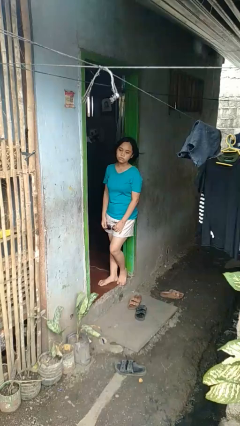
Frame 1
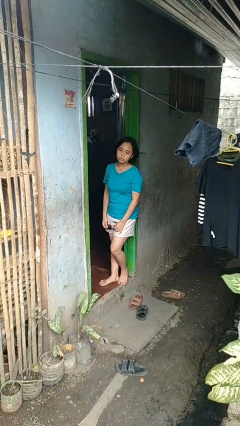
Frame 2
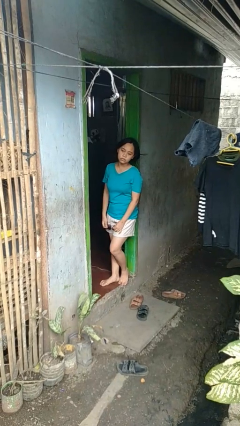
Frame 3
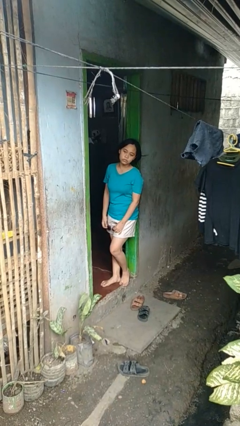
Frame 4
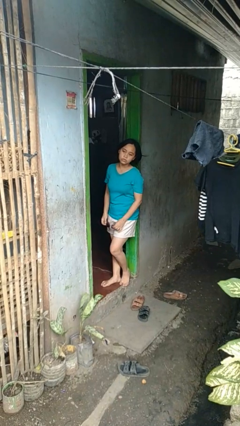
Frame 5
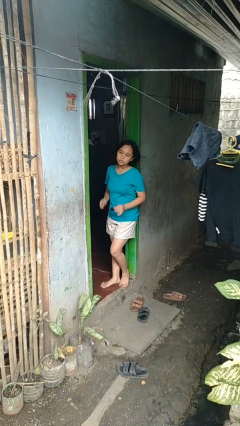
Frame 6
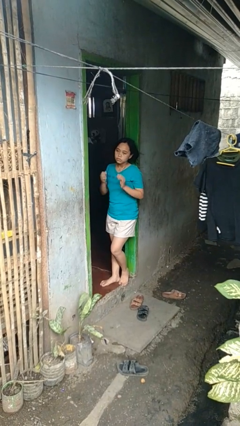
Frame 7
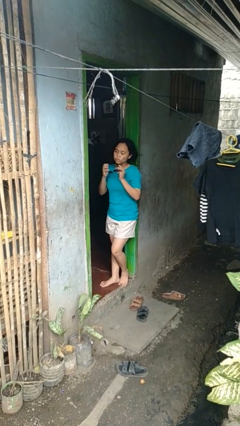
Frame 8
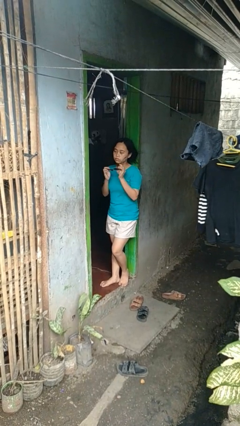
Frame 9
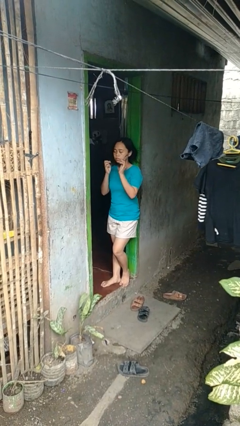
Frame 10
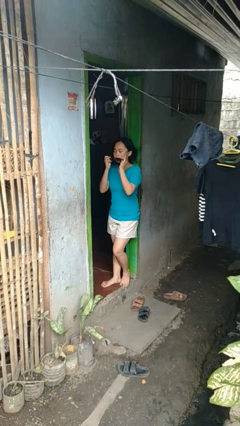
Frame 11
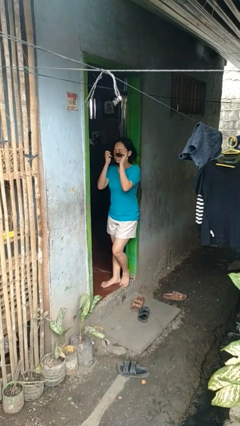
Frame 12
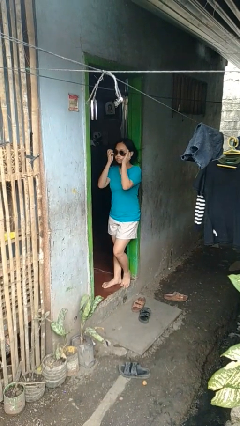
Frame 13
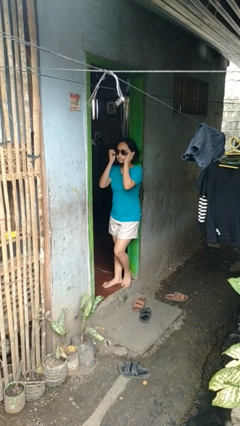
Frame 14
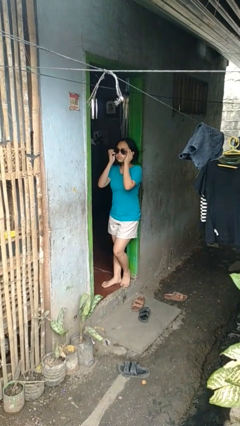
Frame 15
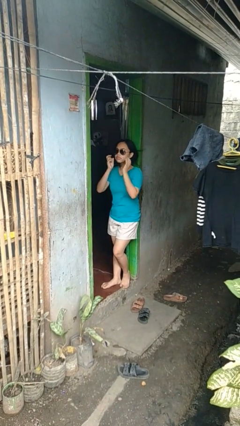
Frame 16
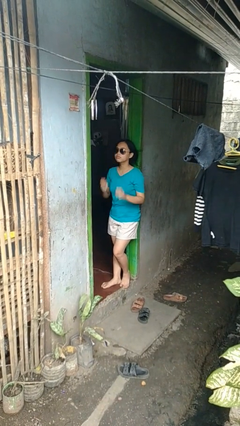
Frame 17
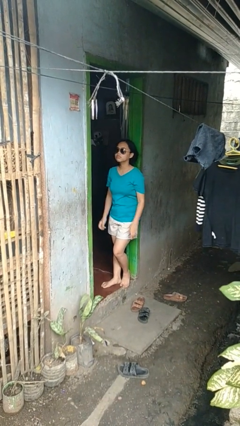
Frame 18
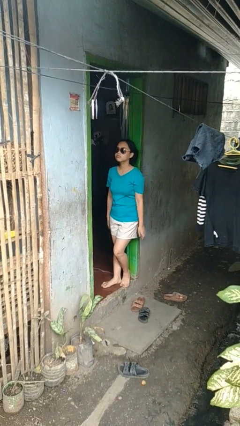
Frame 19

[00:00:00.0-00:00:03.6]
person puts on sunglasses

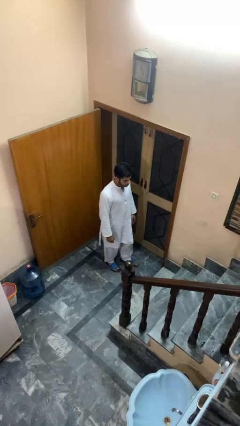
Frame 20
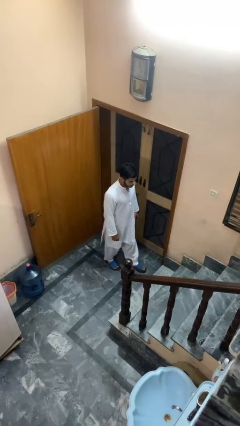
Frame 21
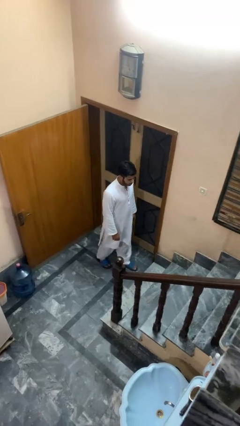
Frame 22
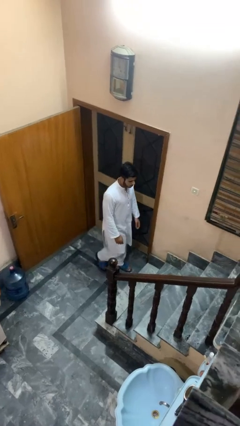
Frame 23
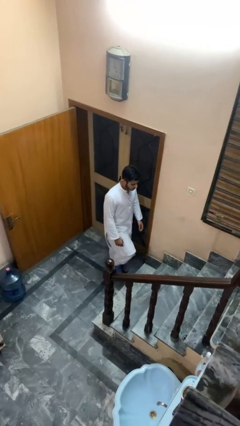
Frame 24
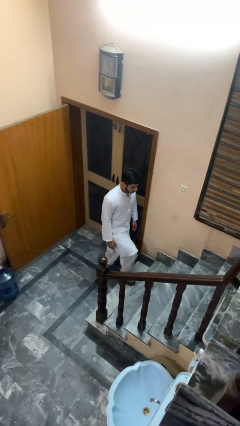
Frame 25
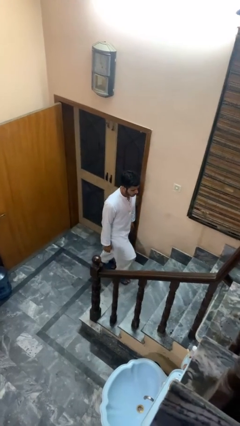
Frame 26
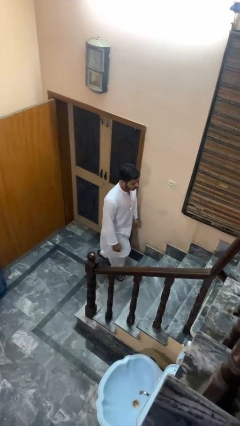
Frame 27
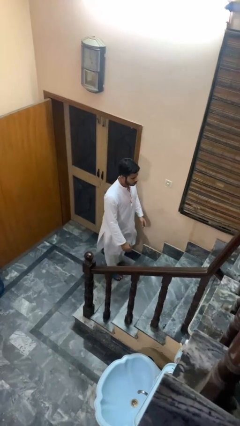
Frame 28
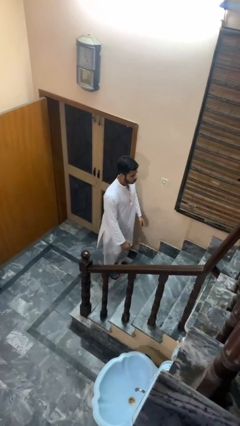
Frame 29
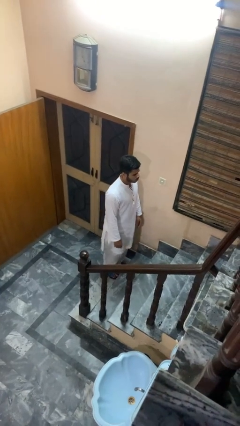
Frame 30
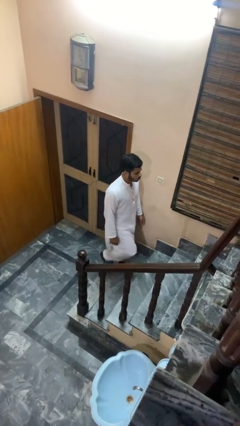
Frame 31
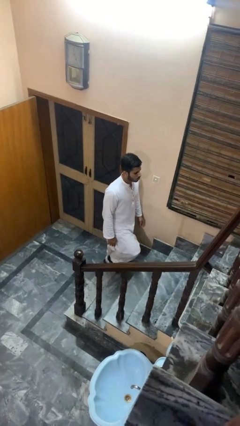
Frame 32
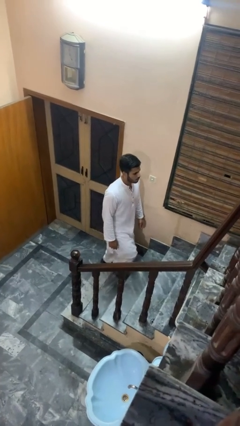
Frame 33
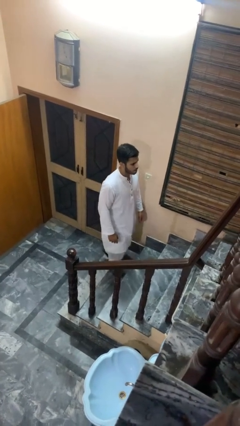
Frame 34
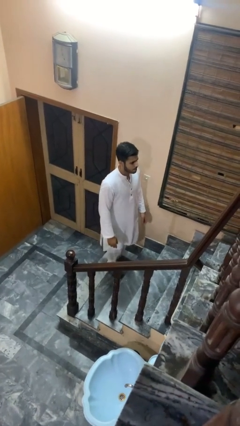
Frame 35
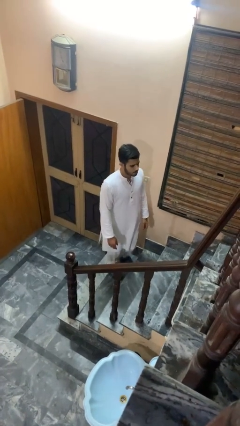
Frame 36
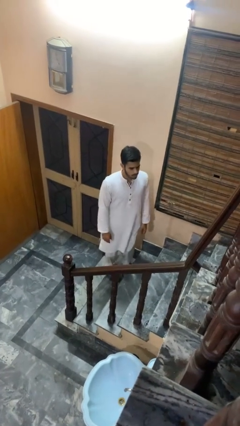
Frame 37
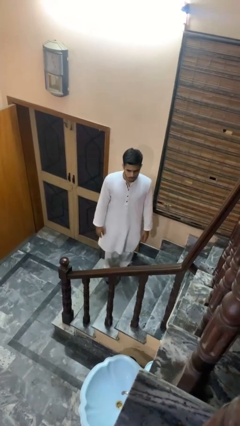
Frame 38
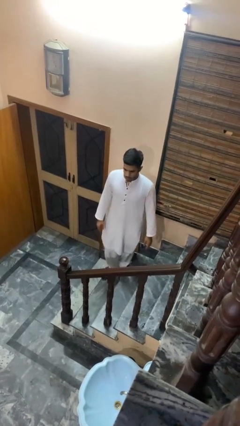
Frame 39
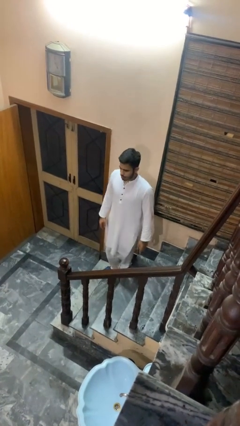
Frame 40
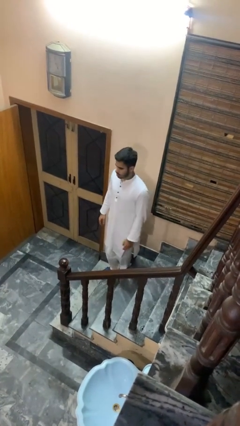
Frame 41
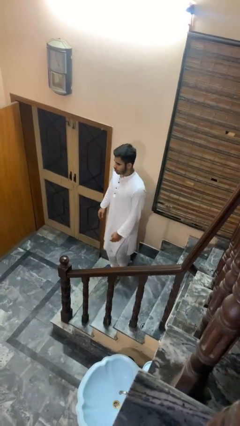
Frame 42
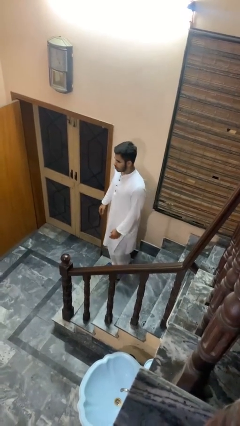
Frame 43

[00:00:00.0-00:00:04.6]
person climbs up stairs

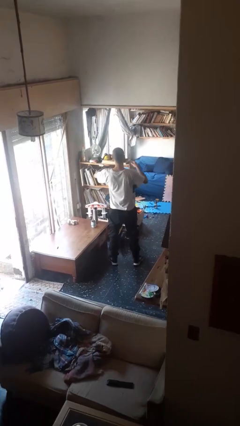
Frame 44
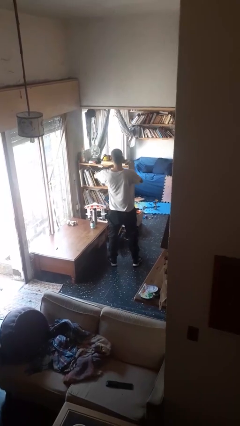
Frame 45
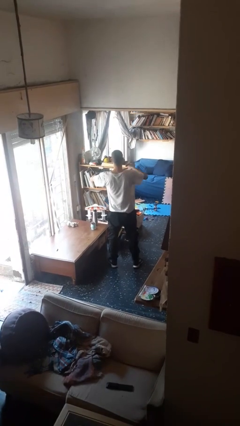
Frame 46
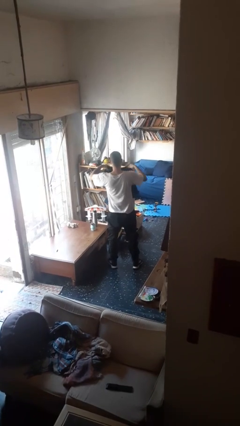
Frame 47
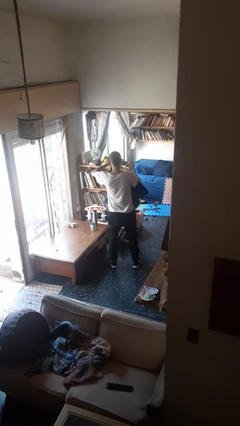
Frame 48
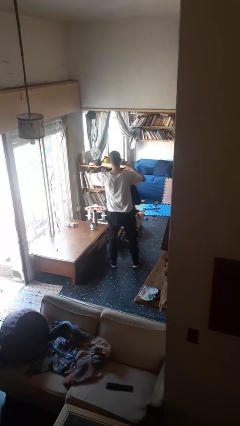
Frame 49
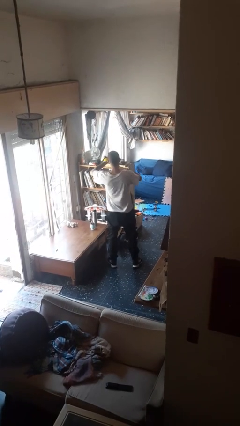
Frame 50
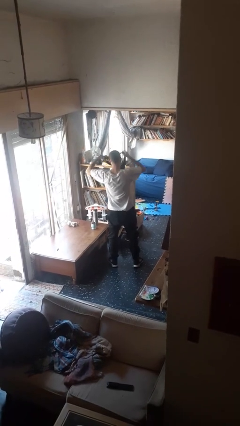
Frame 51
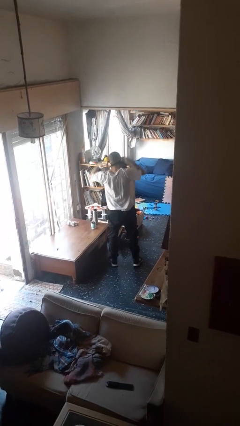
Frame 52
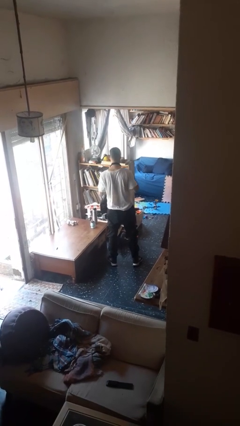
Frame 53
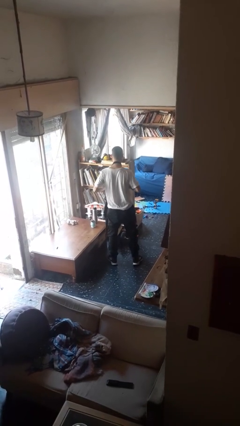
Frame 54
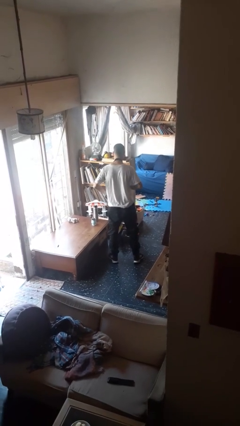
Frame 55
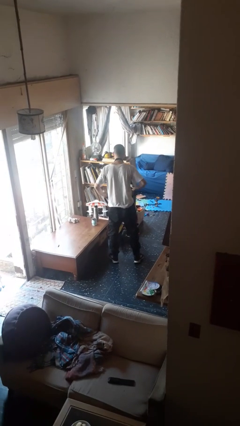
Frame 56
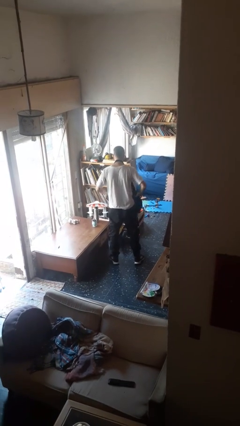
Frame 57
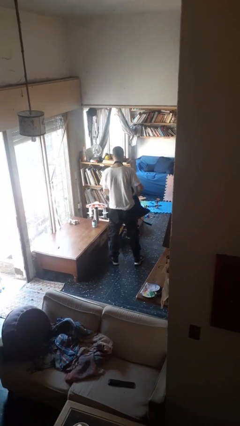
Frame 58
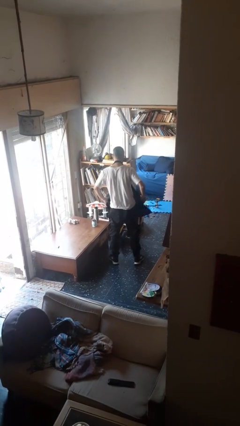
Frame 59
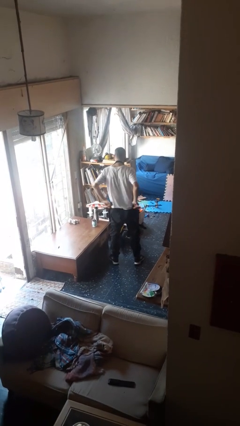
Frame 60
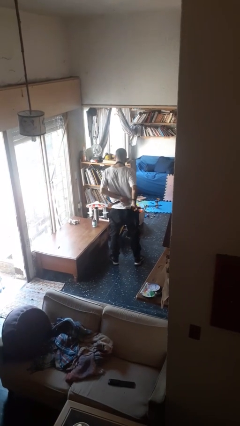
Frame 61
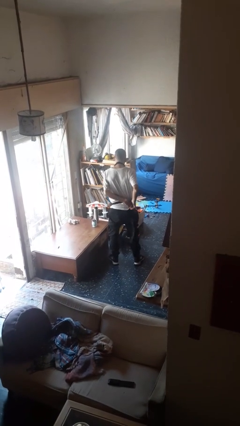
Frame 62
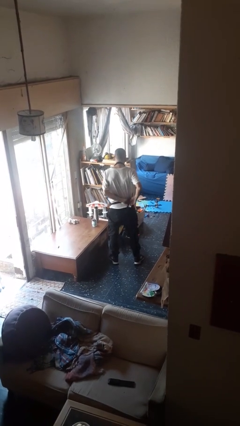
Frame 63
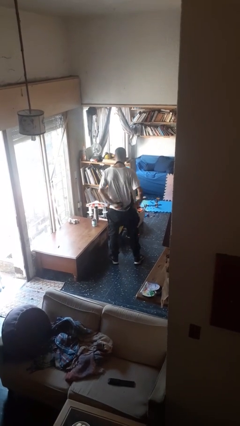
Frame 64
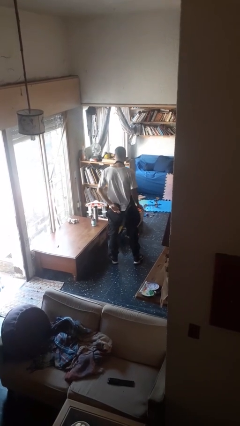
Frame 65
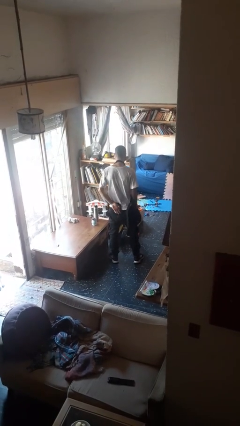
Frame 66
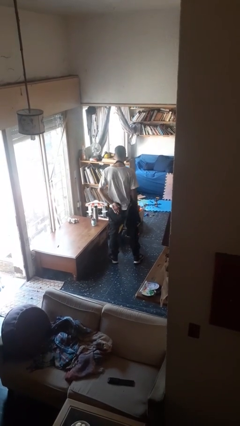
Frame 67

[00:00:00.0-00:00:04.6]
person puts on apron

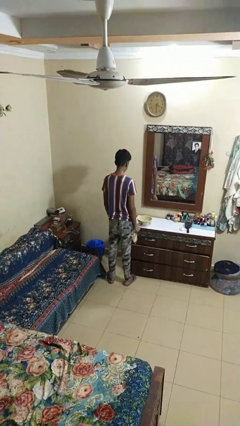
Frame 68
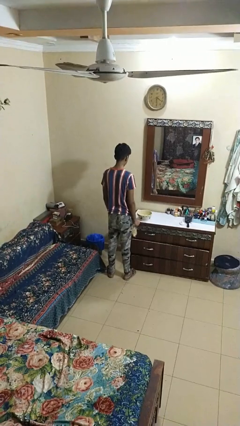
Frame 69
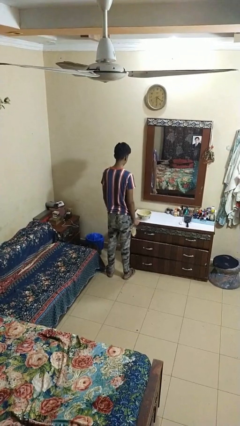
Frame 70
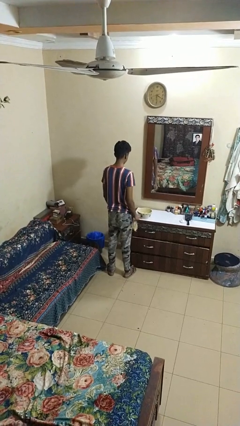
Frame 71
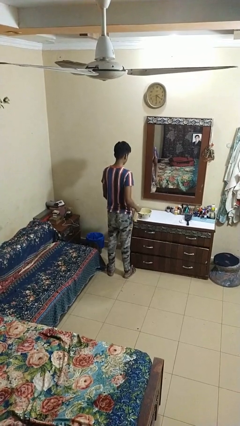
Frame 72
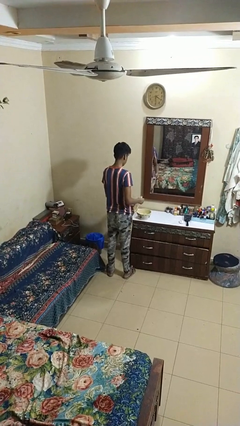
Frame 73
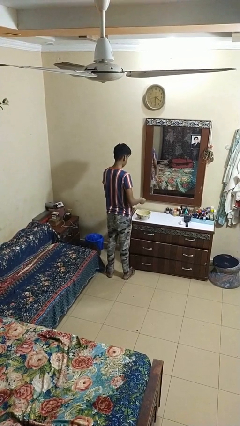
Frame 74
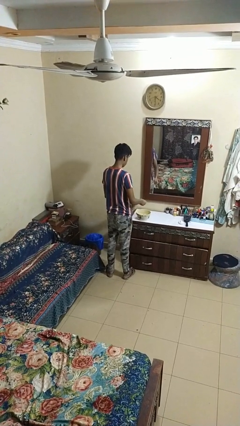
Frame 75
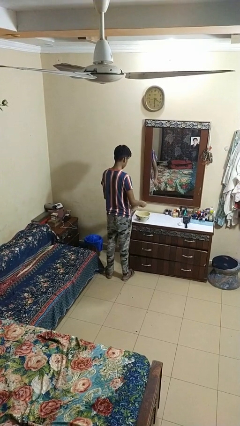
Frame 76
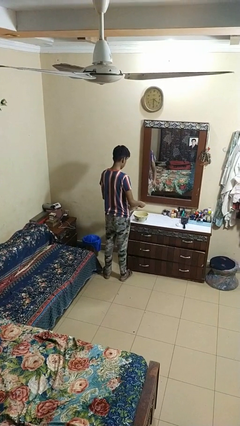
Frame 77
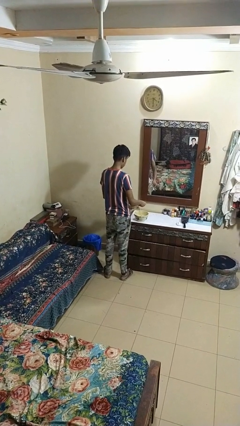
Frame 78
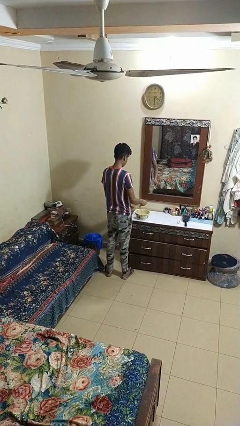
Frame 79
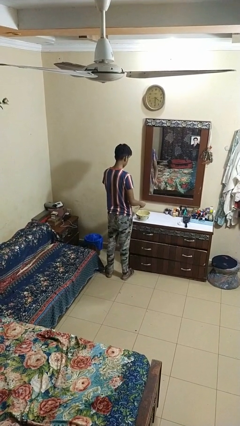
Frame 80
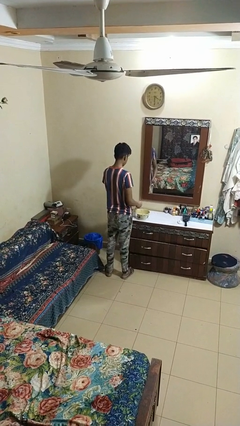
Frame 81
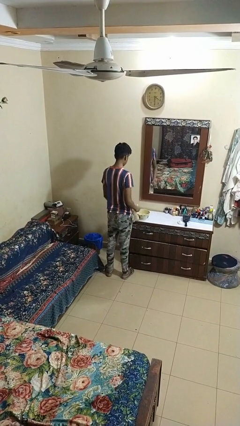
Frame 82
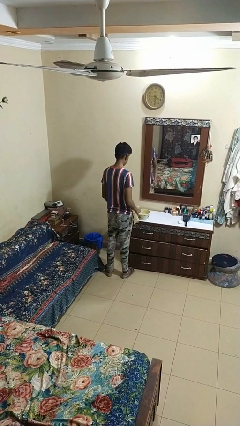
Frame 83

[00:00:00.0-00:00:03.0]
person pours into bowl

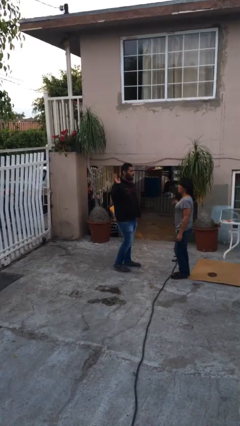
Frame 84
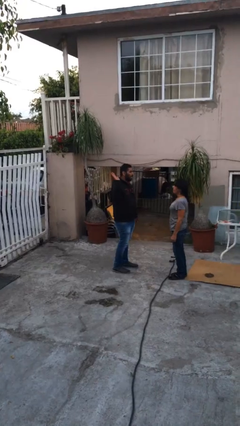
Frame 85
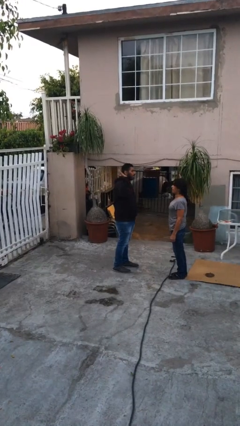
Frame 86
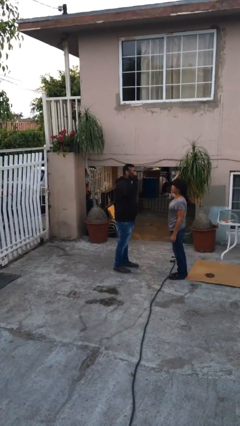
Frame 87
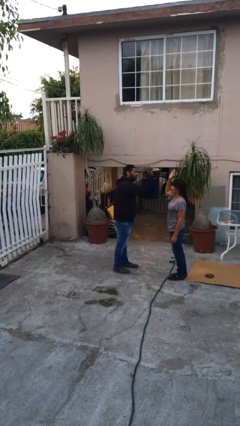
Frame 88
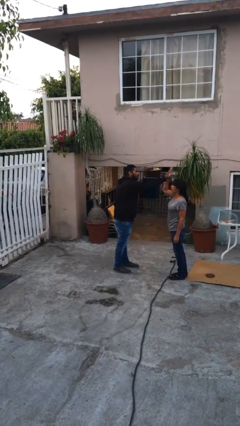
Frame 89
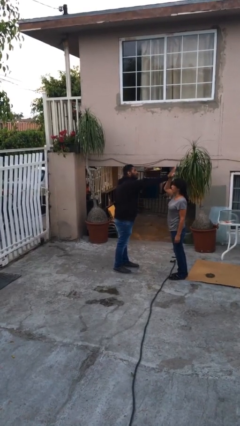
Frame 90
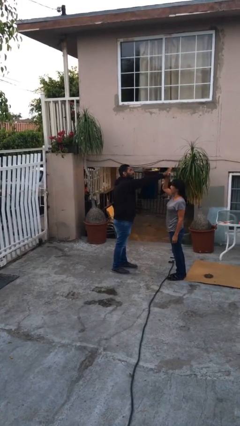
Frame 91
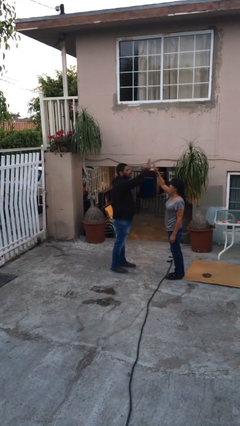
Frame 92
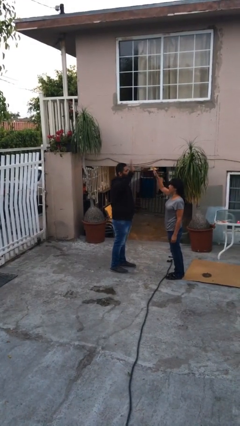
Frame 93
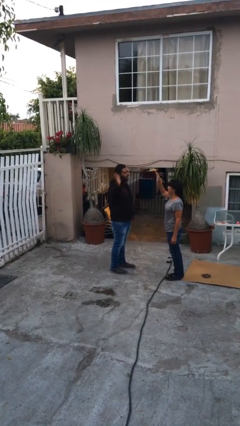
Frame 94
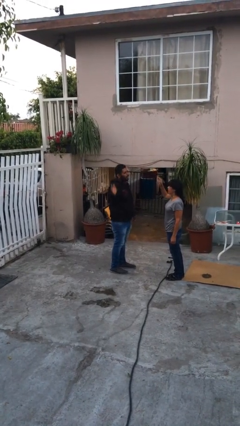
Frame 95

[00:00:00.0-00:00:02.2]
person highfives hand

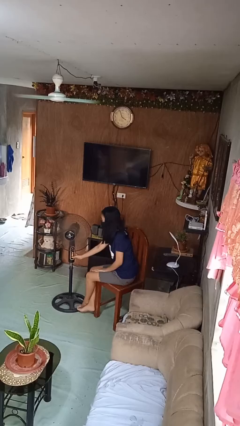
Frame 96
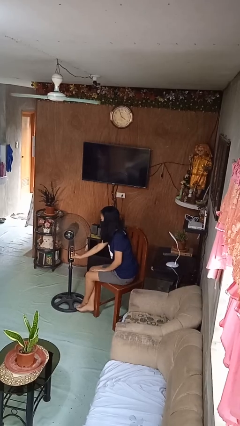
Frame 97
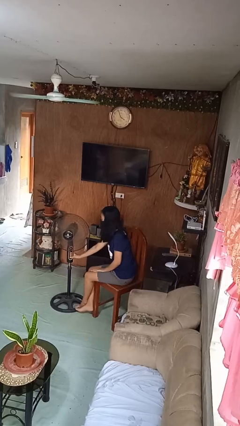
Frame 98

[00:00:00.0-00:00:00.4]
person turns off fan
